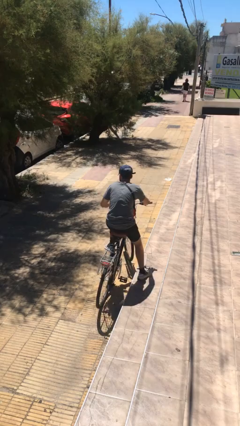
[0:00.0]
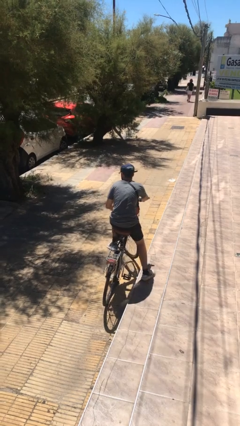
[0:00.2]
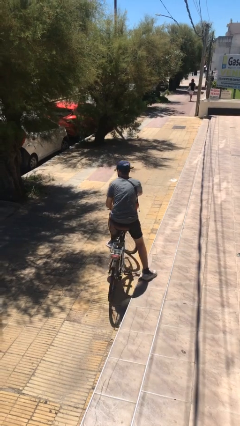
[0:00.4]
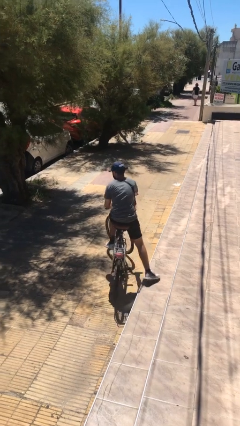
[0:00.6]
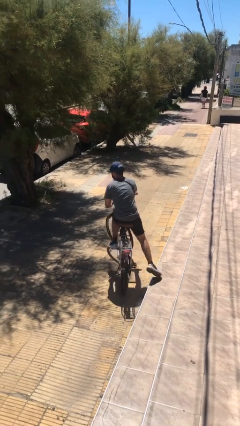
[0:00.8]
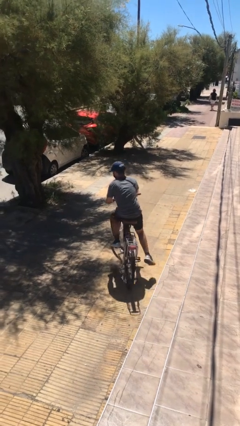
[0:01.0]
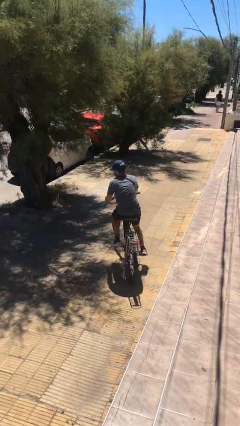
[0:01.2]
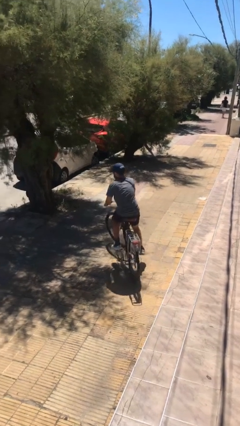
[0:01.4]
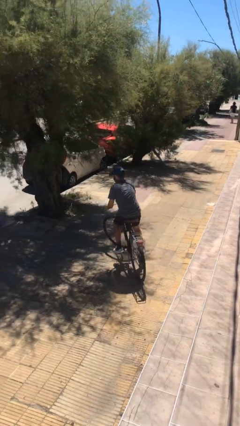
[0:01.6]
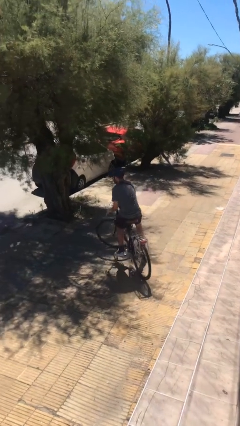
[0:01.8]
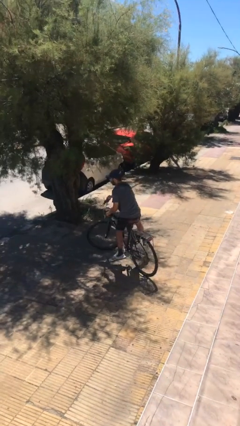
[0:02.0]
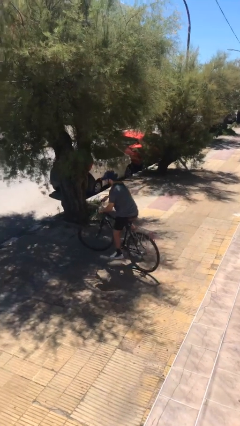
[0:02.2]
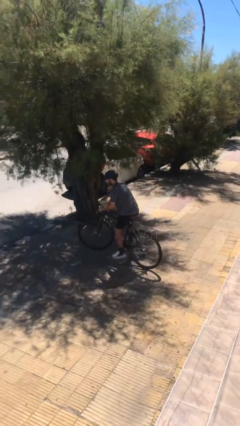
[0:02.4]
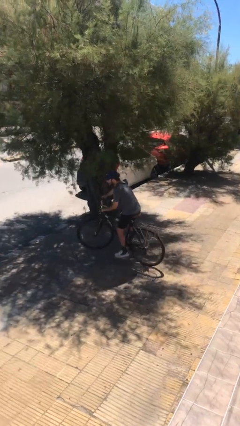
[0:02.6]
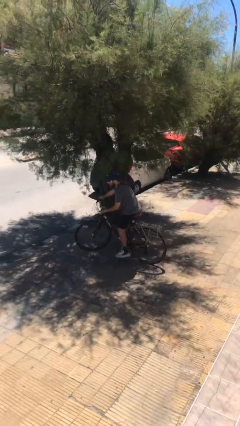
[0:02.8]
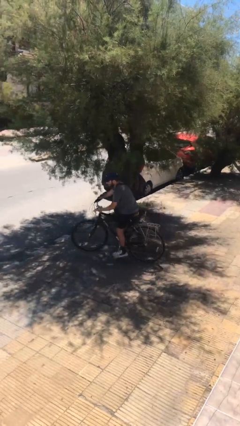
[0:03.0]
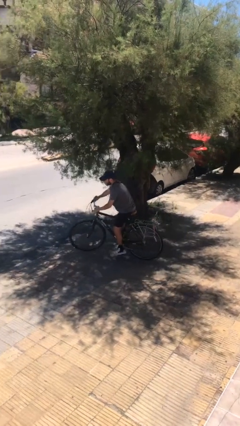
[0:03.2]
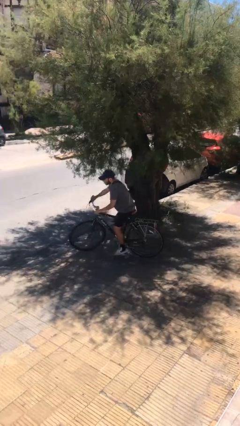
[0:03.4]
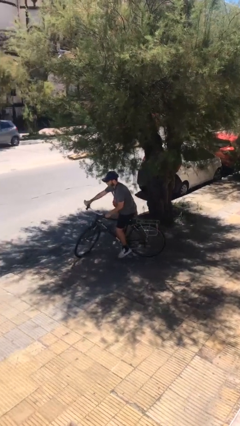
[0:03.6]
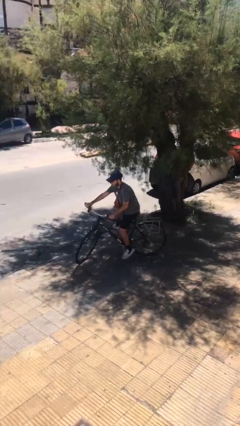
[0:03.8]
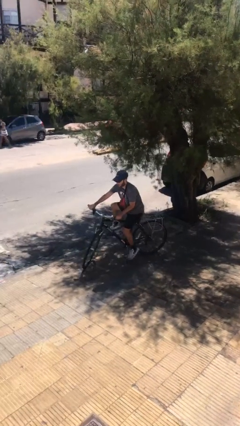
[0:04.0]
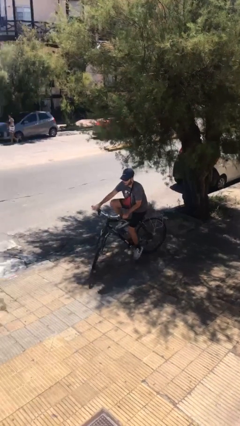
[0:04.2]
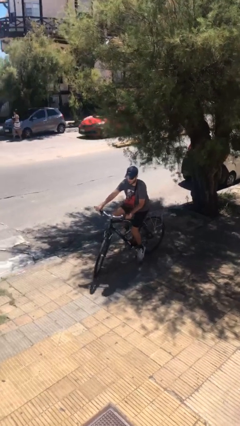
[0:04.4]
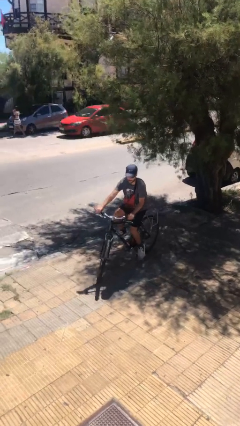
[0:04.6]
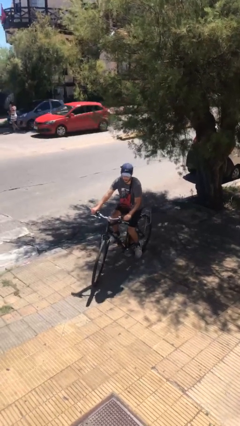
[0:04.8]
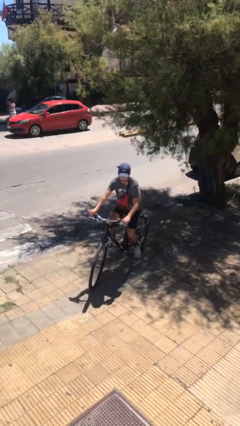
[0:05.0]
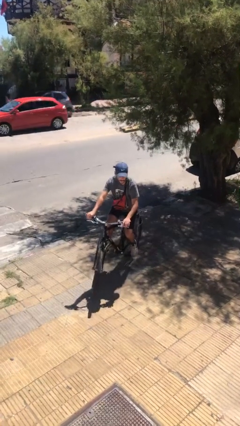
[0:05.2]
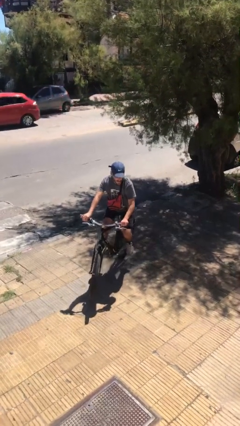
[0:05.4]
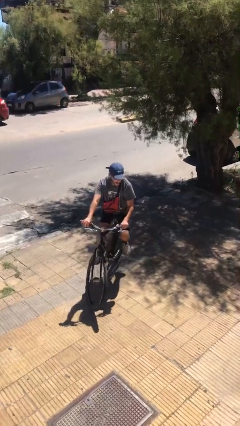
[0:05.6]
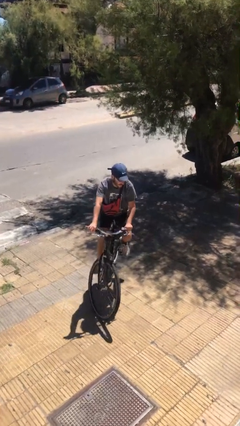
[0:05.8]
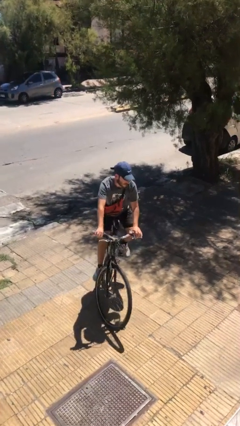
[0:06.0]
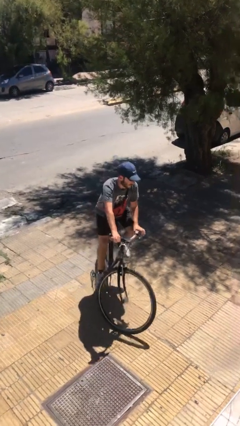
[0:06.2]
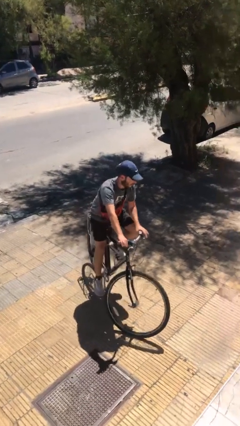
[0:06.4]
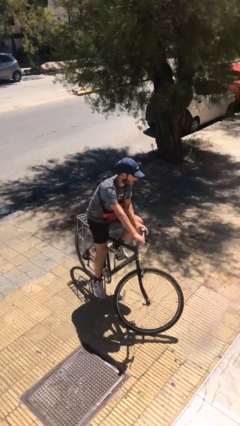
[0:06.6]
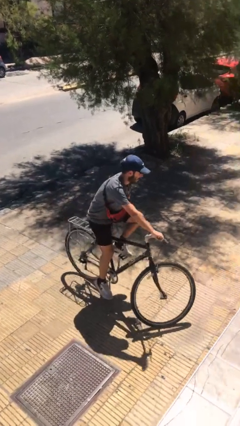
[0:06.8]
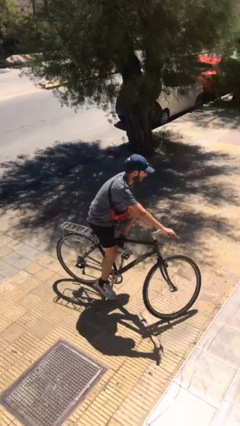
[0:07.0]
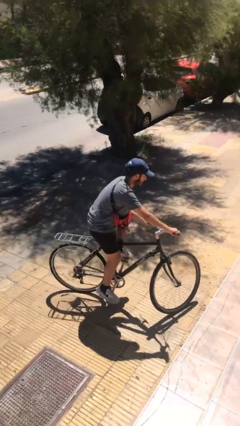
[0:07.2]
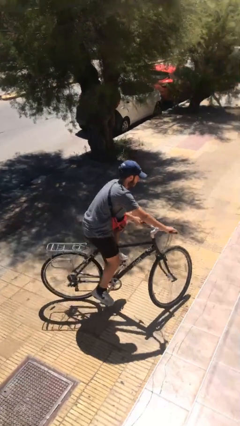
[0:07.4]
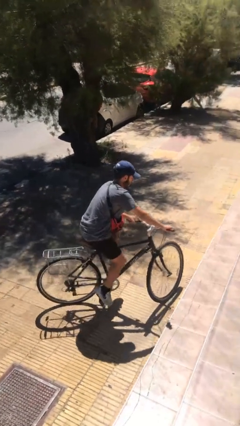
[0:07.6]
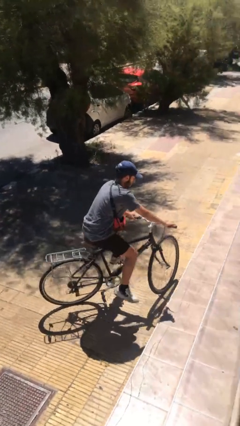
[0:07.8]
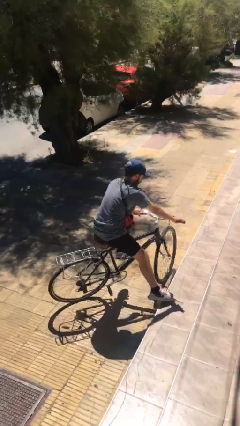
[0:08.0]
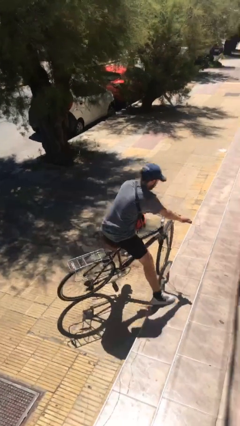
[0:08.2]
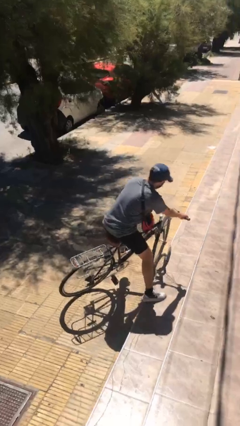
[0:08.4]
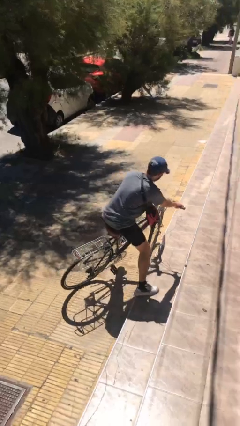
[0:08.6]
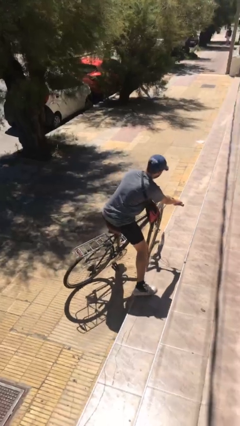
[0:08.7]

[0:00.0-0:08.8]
person rides bicycle

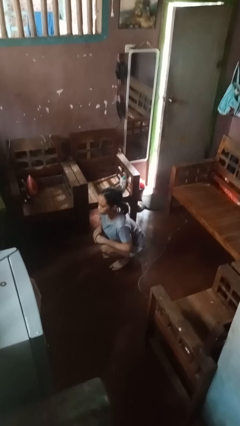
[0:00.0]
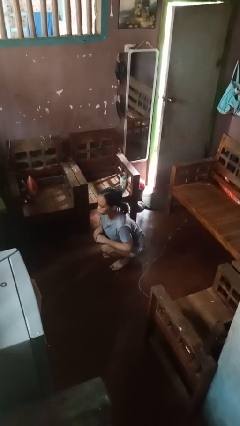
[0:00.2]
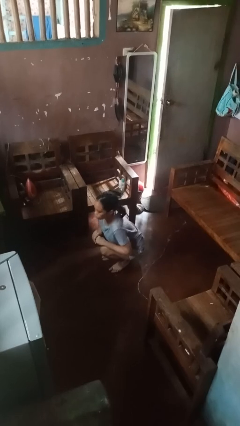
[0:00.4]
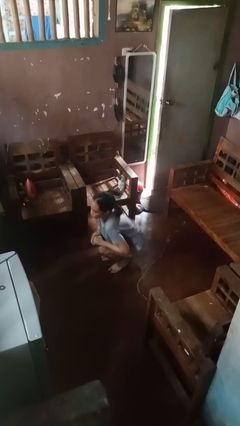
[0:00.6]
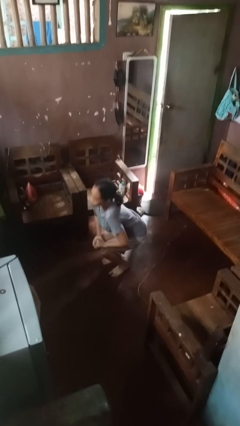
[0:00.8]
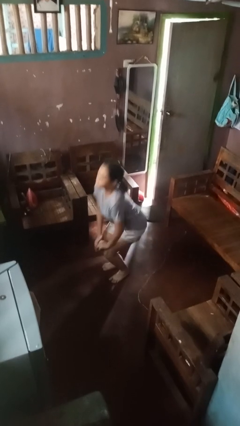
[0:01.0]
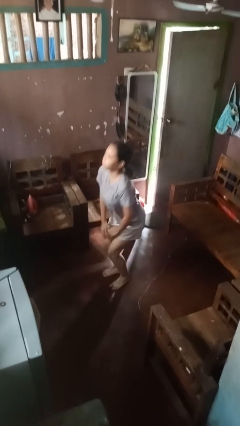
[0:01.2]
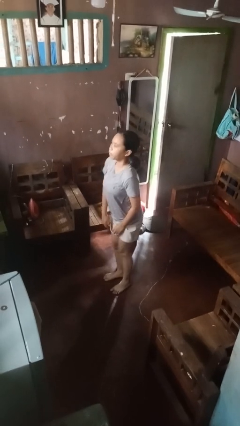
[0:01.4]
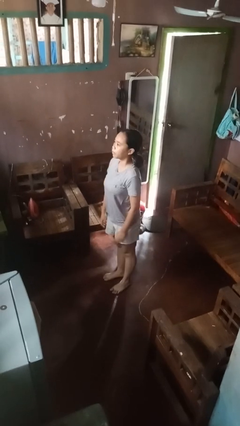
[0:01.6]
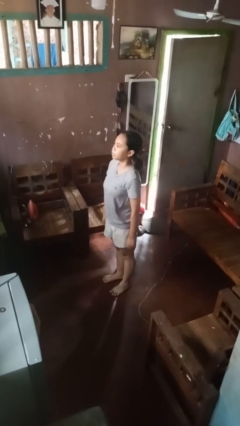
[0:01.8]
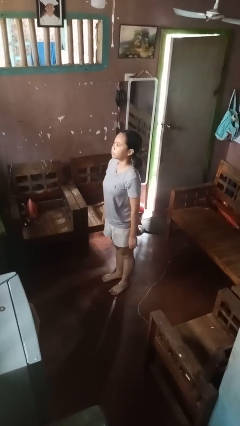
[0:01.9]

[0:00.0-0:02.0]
person stands up

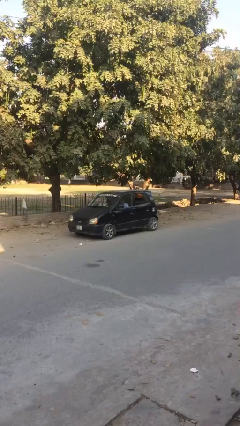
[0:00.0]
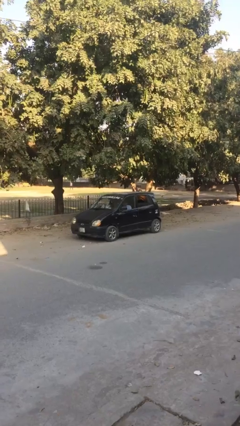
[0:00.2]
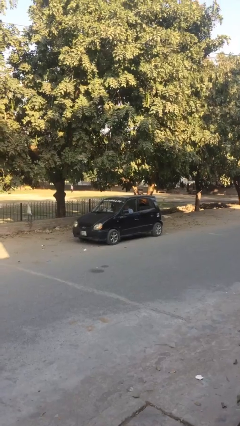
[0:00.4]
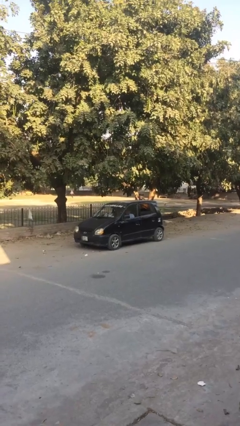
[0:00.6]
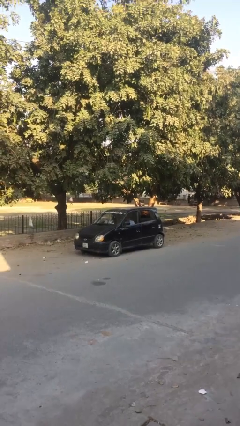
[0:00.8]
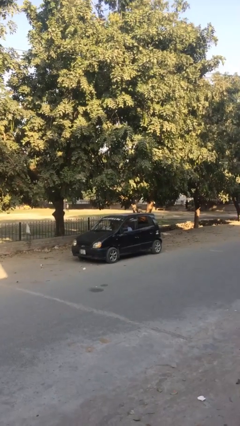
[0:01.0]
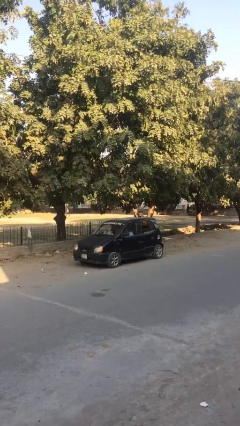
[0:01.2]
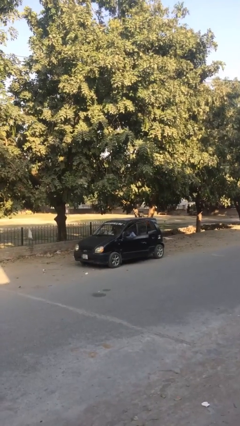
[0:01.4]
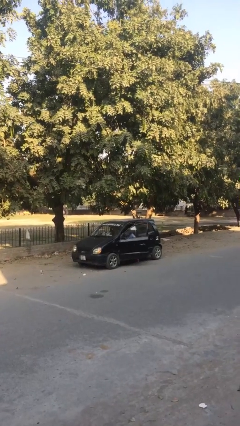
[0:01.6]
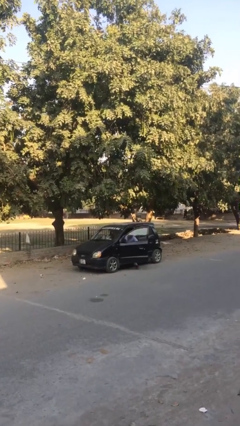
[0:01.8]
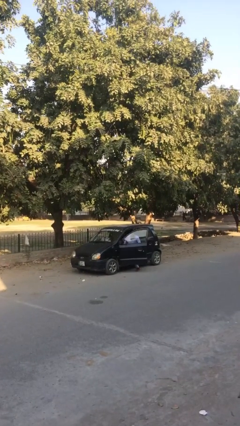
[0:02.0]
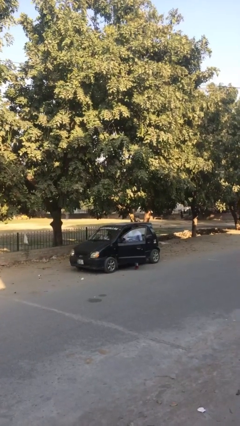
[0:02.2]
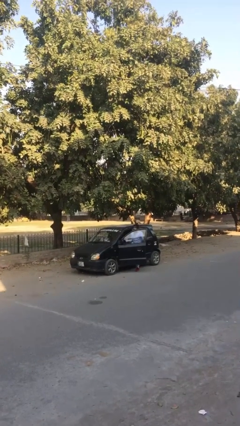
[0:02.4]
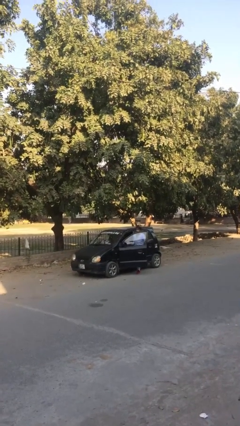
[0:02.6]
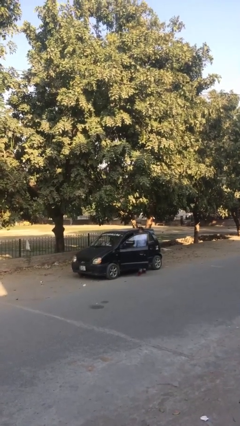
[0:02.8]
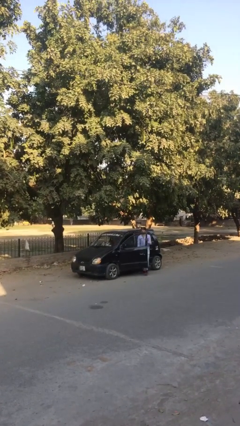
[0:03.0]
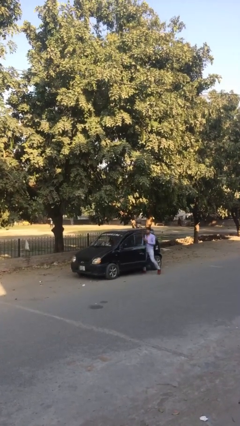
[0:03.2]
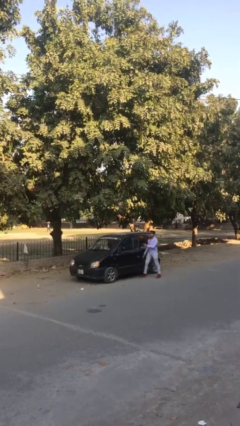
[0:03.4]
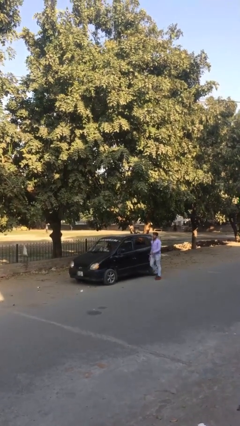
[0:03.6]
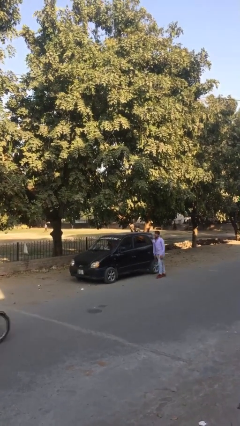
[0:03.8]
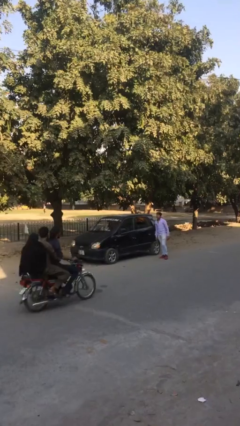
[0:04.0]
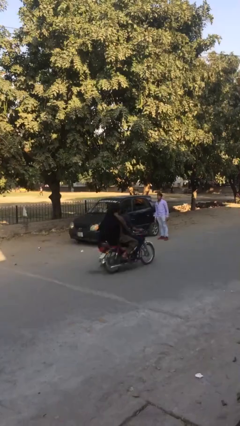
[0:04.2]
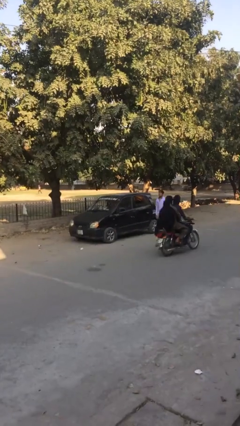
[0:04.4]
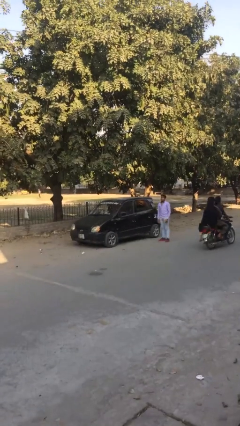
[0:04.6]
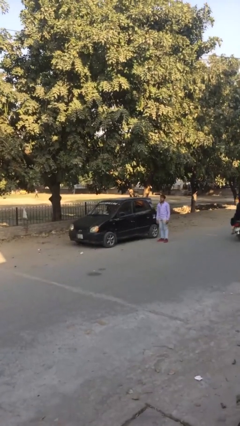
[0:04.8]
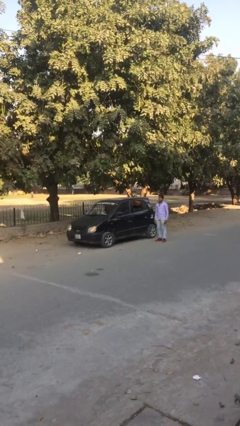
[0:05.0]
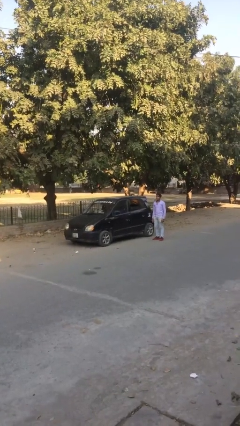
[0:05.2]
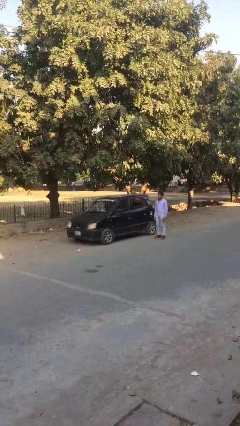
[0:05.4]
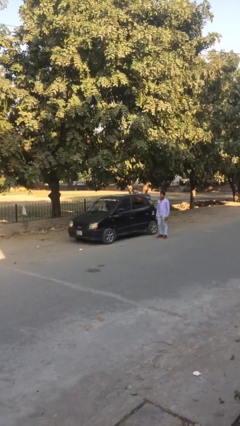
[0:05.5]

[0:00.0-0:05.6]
car drops off person

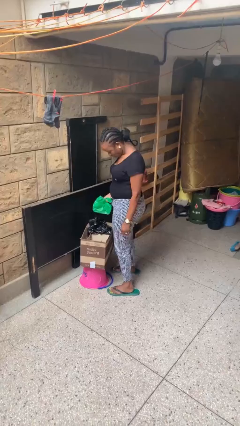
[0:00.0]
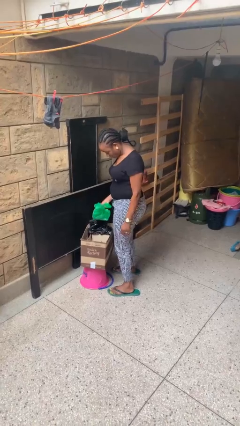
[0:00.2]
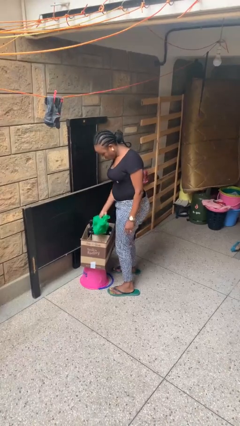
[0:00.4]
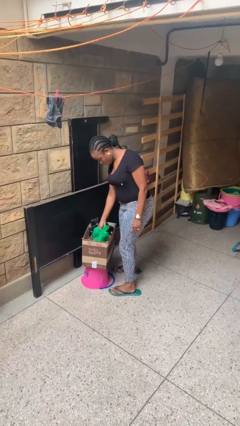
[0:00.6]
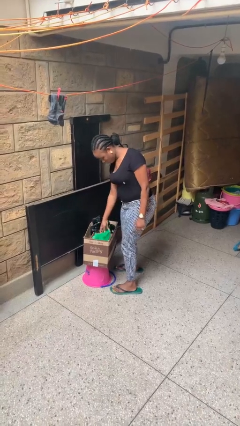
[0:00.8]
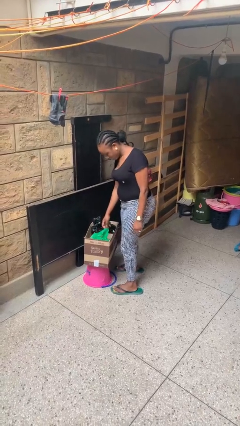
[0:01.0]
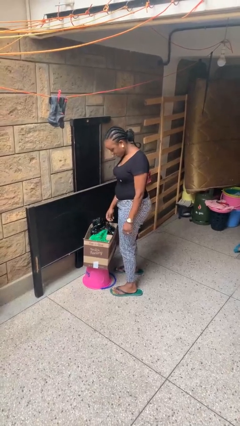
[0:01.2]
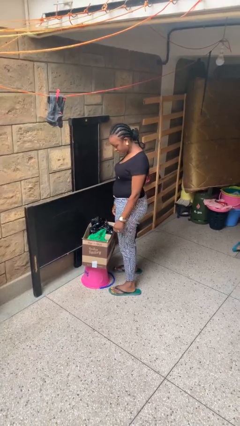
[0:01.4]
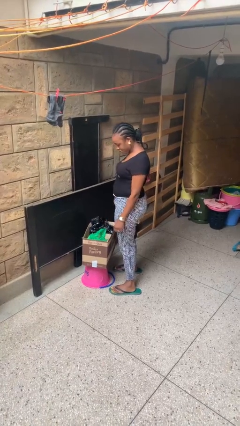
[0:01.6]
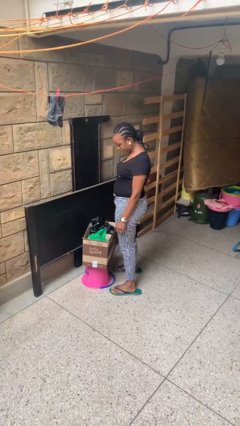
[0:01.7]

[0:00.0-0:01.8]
person puts object into box
